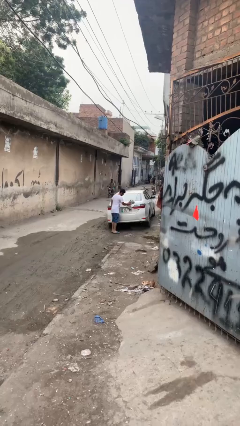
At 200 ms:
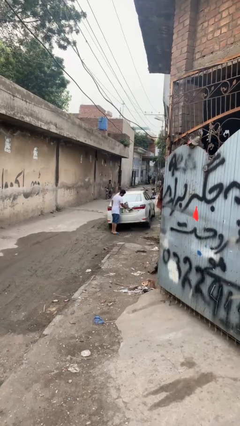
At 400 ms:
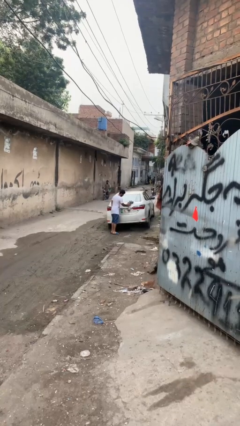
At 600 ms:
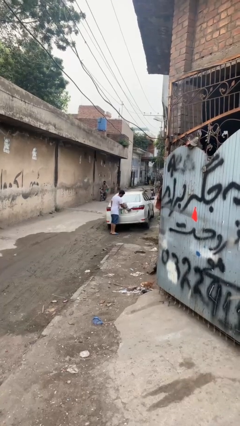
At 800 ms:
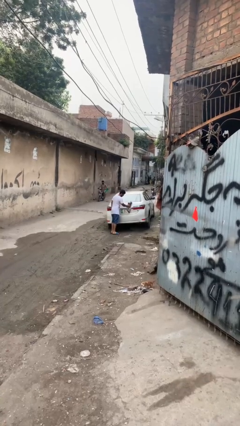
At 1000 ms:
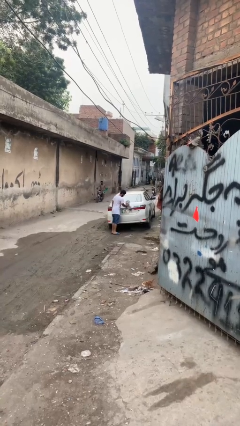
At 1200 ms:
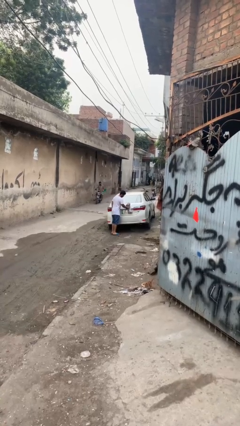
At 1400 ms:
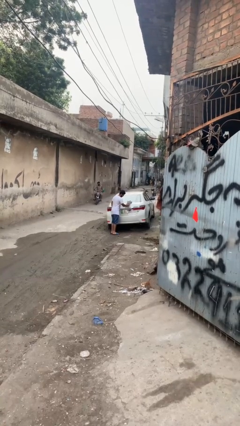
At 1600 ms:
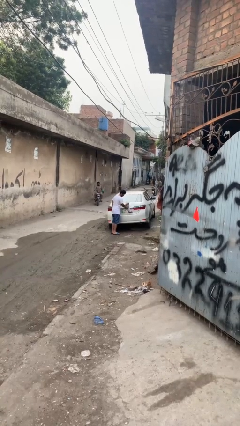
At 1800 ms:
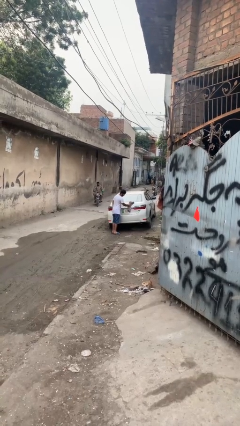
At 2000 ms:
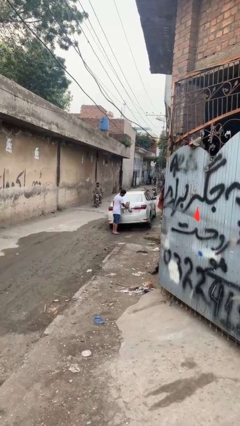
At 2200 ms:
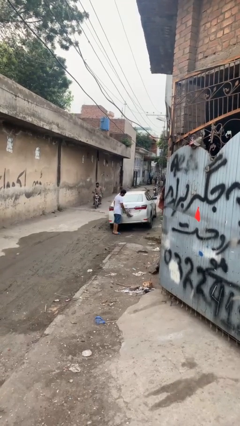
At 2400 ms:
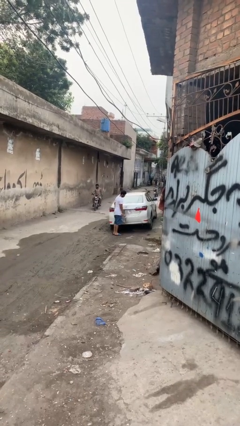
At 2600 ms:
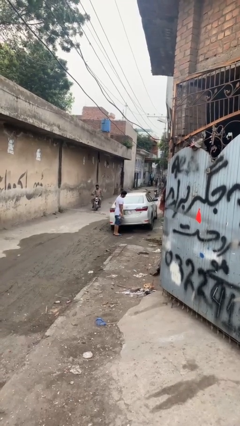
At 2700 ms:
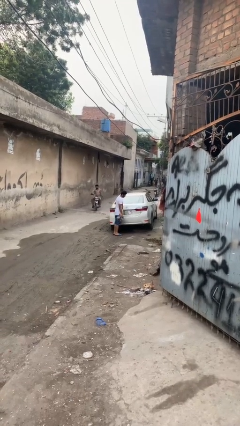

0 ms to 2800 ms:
person polishes car with rag

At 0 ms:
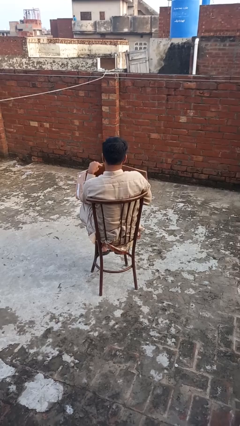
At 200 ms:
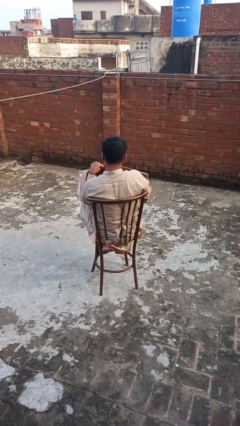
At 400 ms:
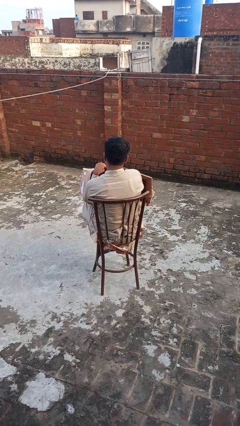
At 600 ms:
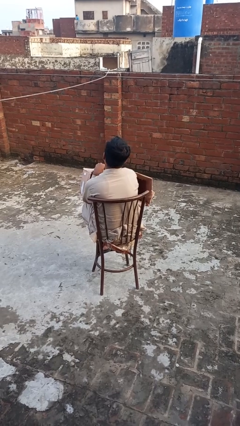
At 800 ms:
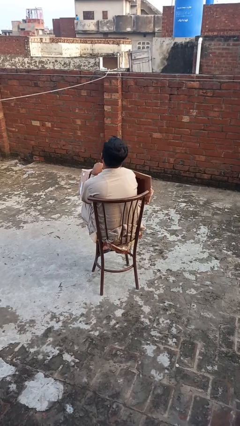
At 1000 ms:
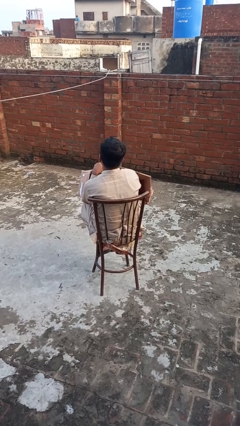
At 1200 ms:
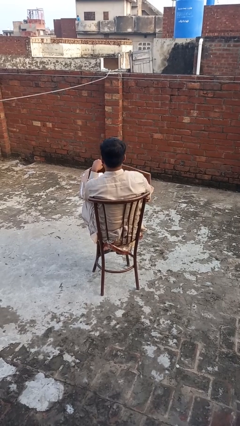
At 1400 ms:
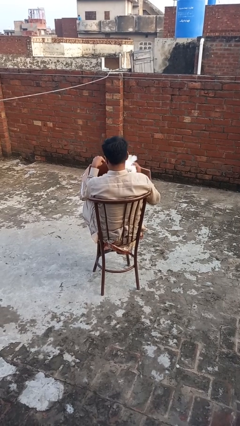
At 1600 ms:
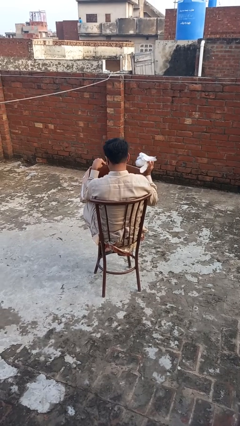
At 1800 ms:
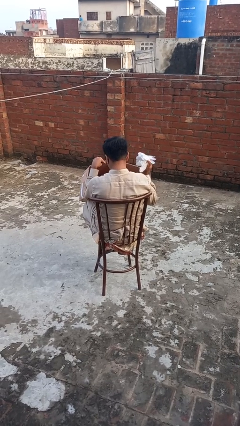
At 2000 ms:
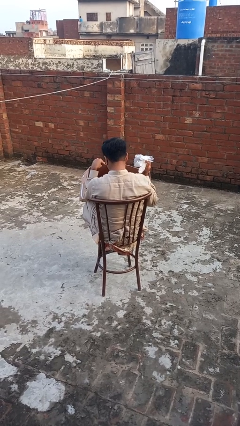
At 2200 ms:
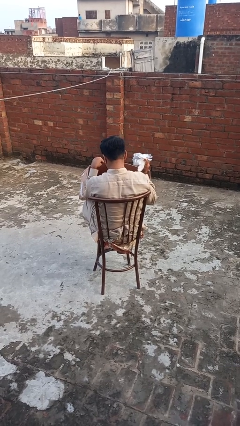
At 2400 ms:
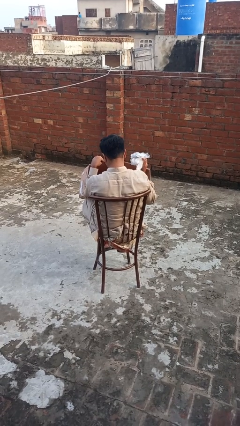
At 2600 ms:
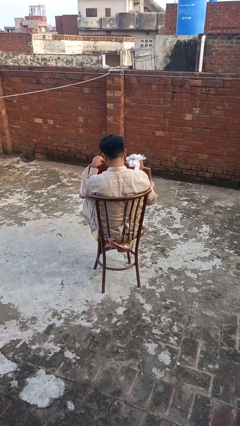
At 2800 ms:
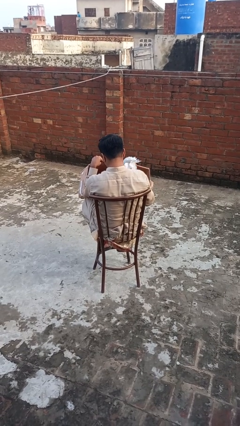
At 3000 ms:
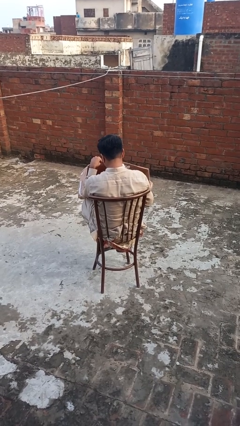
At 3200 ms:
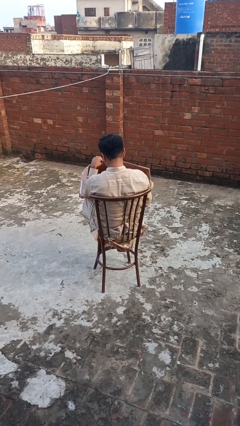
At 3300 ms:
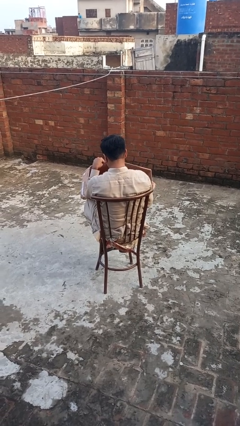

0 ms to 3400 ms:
person searches in box

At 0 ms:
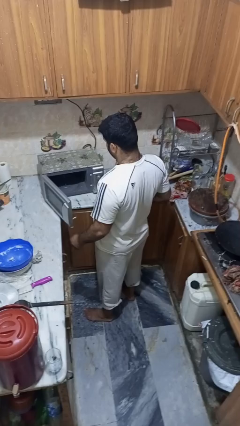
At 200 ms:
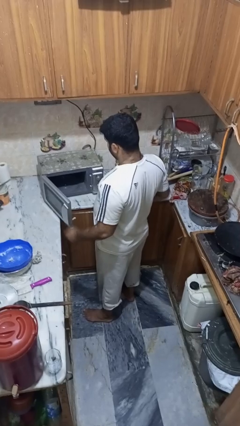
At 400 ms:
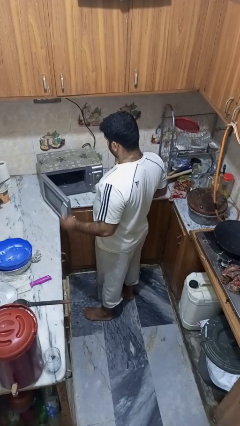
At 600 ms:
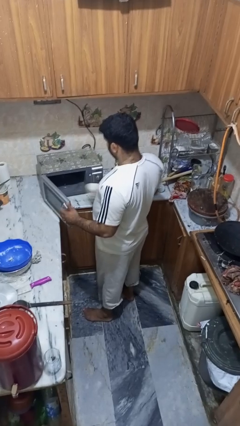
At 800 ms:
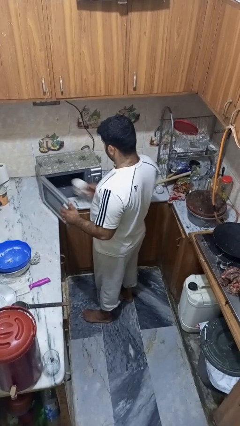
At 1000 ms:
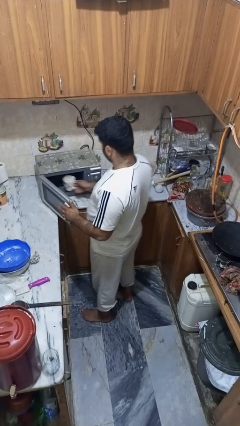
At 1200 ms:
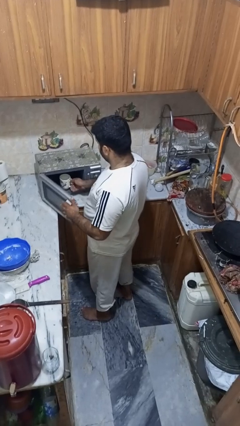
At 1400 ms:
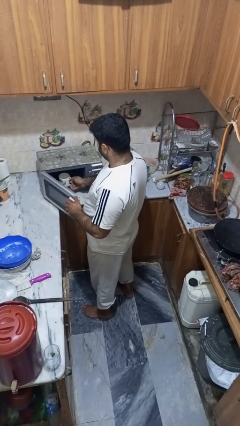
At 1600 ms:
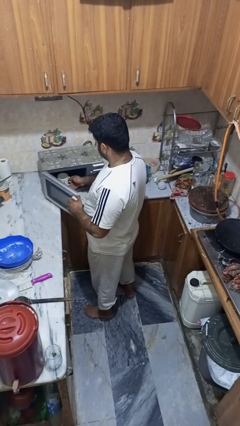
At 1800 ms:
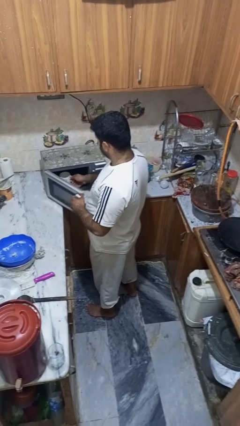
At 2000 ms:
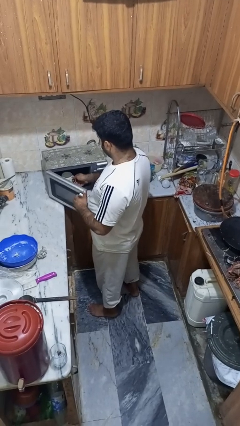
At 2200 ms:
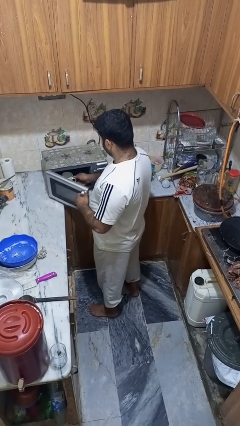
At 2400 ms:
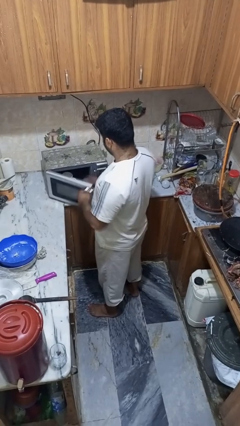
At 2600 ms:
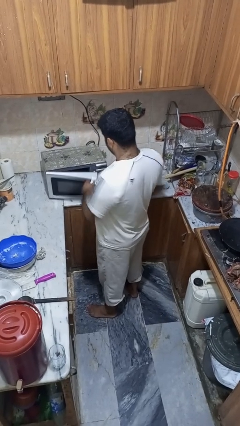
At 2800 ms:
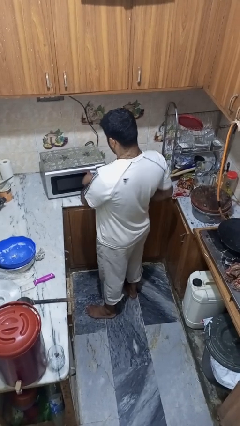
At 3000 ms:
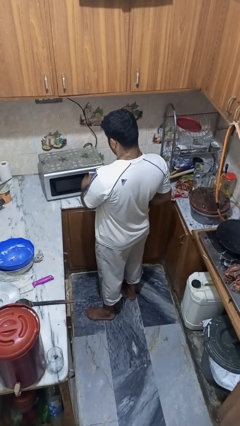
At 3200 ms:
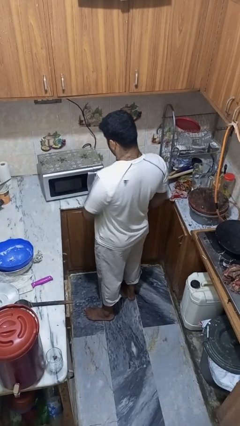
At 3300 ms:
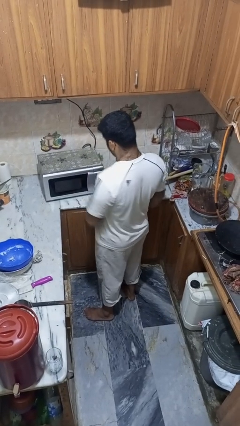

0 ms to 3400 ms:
person puts object into microwave

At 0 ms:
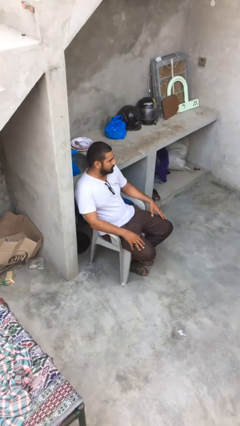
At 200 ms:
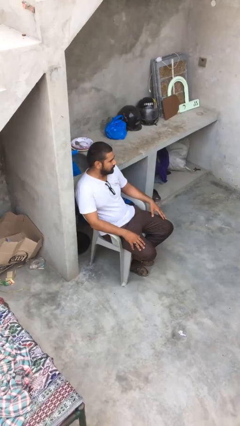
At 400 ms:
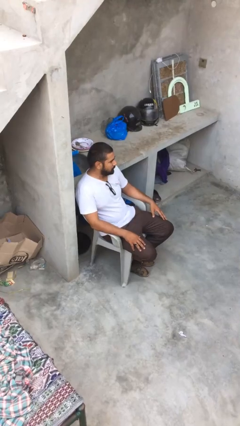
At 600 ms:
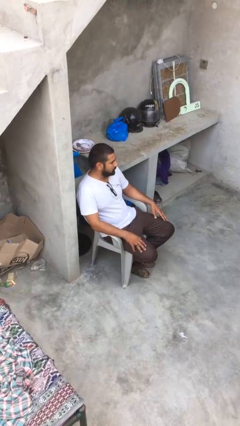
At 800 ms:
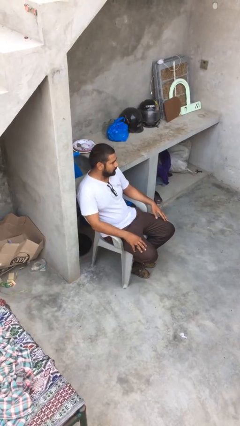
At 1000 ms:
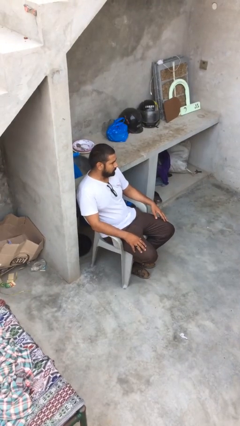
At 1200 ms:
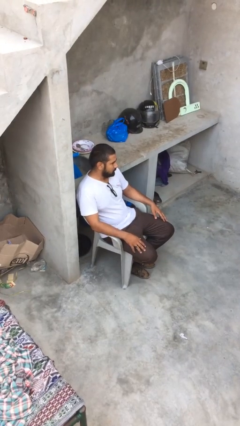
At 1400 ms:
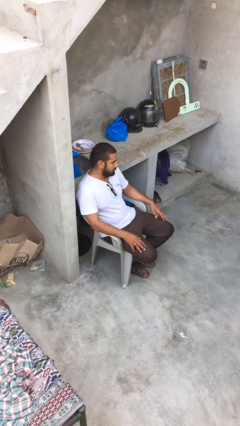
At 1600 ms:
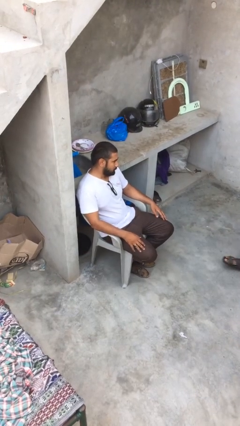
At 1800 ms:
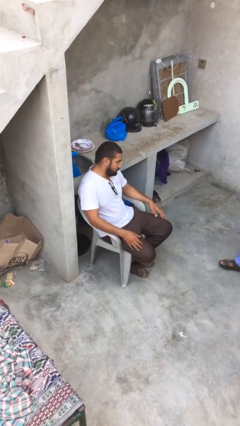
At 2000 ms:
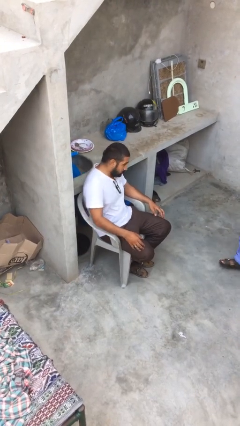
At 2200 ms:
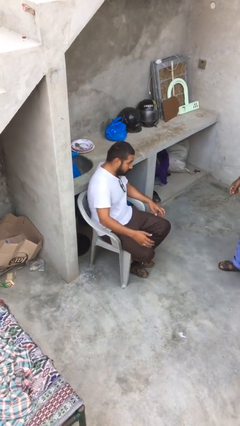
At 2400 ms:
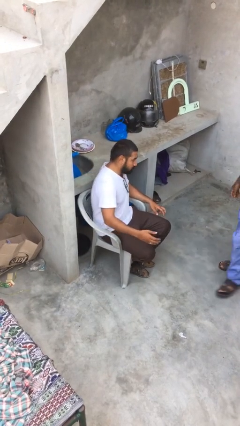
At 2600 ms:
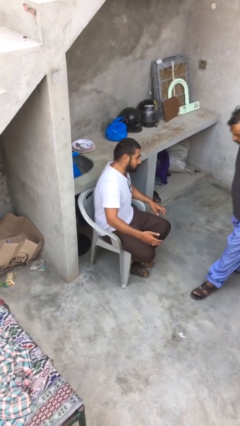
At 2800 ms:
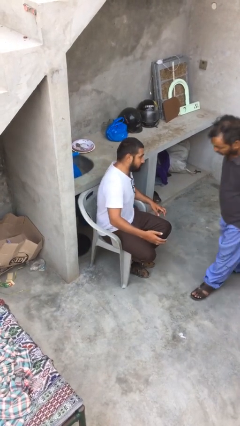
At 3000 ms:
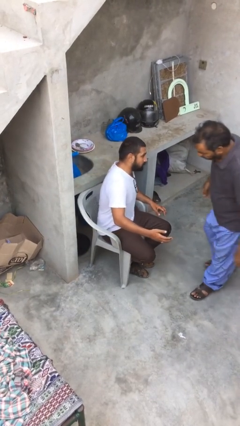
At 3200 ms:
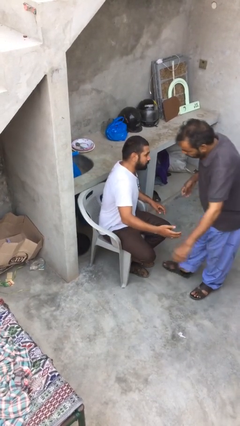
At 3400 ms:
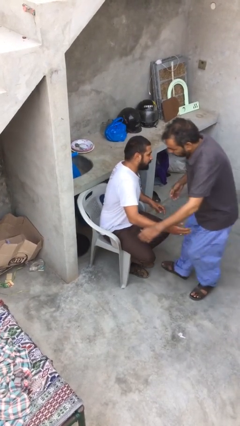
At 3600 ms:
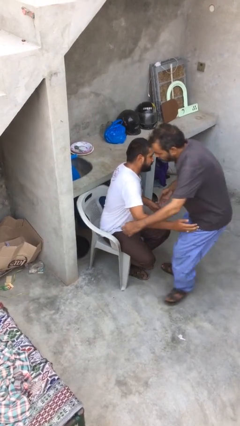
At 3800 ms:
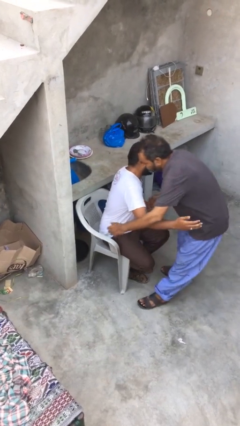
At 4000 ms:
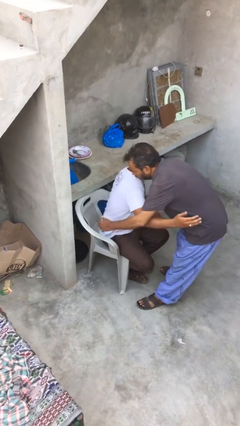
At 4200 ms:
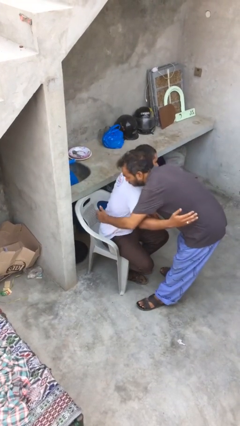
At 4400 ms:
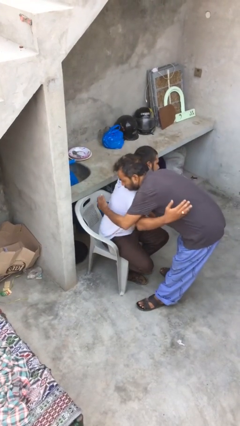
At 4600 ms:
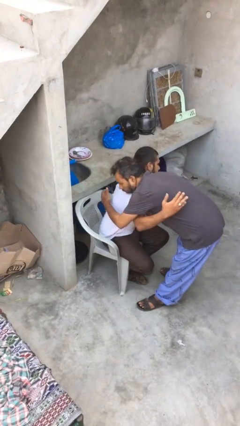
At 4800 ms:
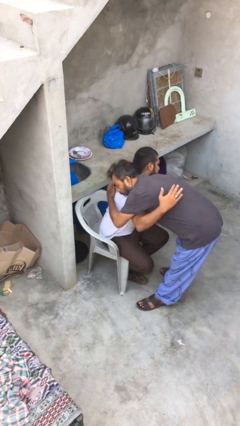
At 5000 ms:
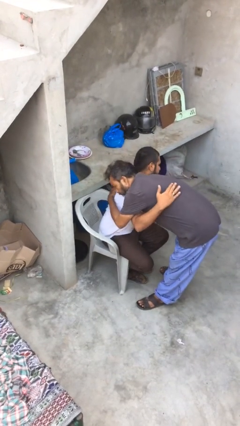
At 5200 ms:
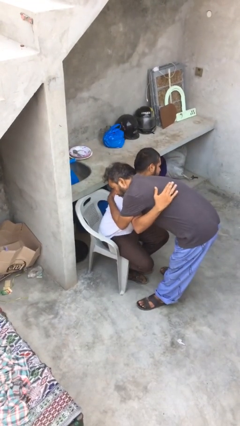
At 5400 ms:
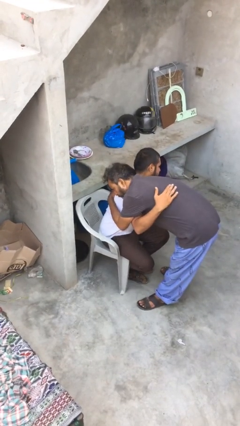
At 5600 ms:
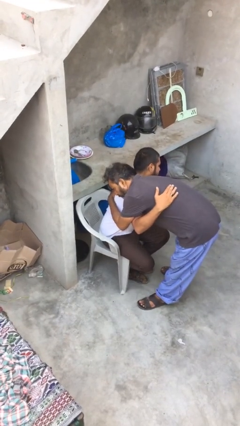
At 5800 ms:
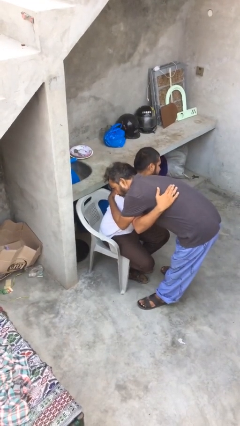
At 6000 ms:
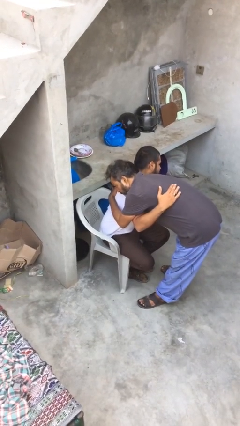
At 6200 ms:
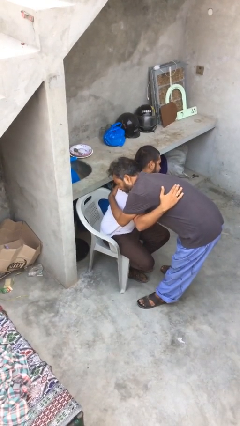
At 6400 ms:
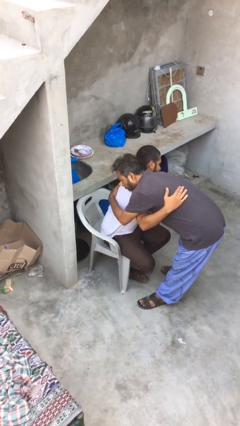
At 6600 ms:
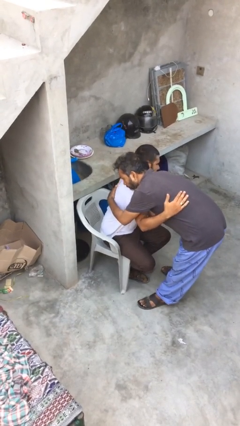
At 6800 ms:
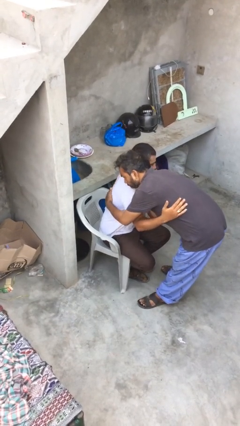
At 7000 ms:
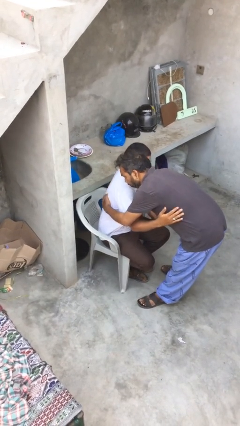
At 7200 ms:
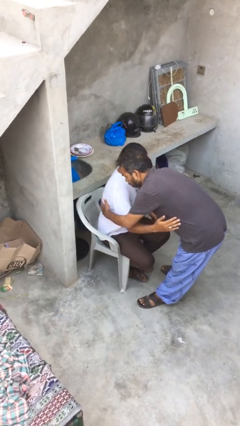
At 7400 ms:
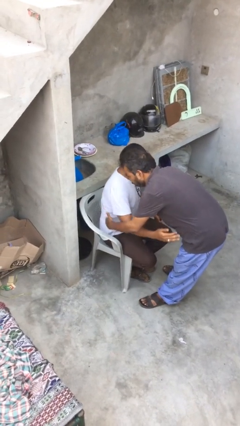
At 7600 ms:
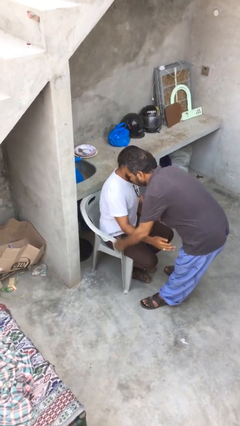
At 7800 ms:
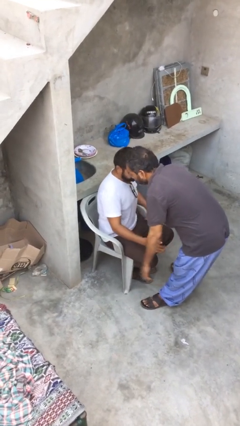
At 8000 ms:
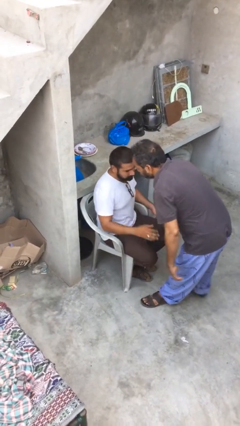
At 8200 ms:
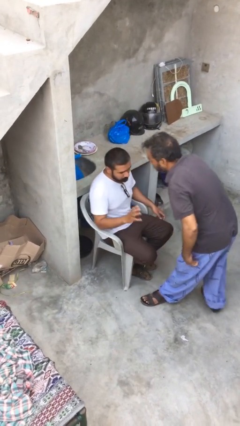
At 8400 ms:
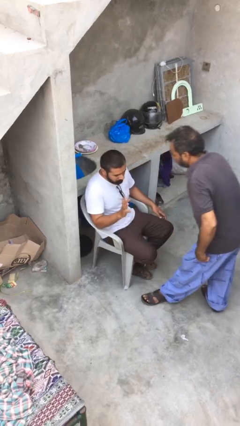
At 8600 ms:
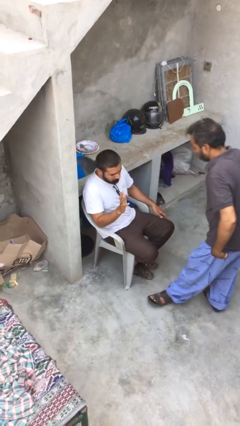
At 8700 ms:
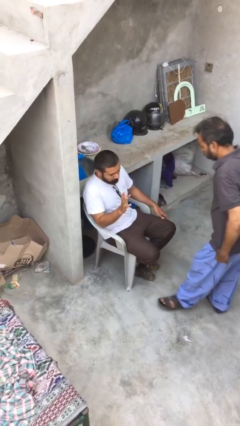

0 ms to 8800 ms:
person embraces person
